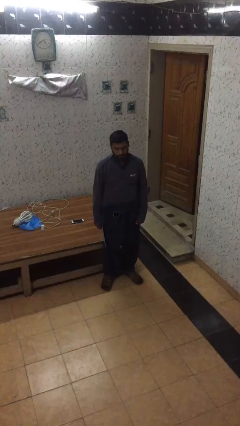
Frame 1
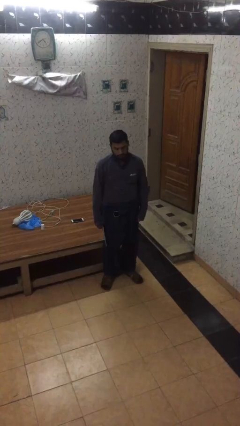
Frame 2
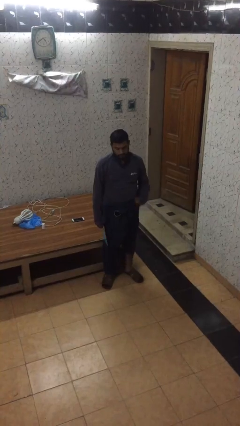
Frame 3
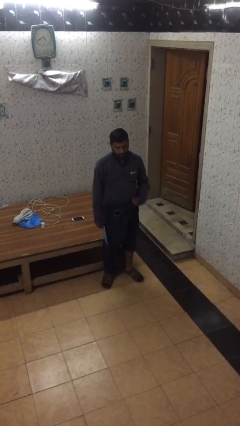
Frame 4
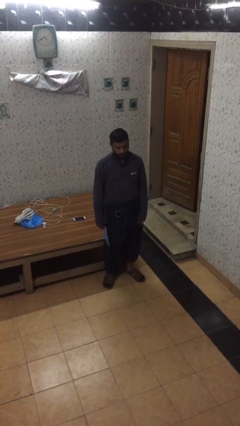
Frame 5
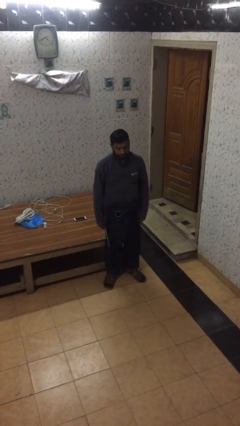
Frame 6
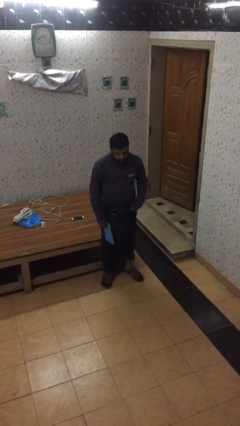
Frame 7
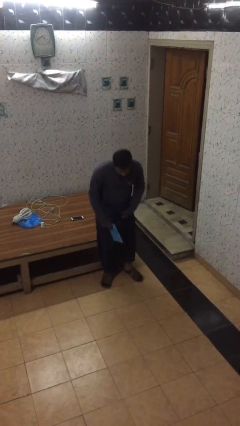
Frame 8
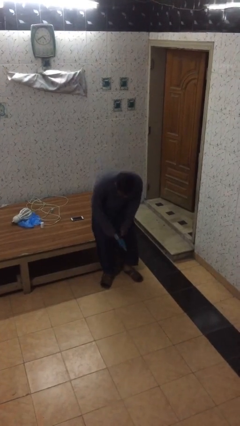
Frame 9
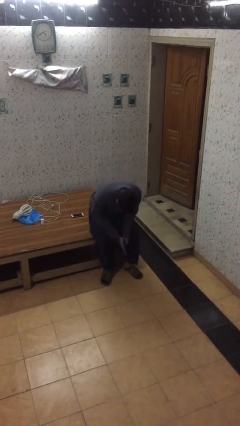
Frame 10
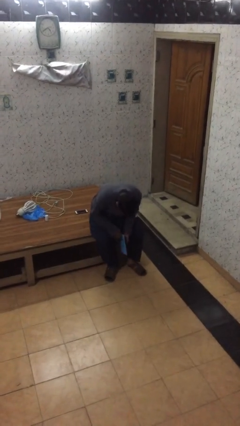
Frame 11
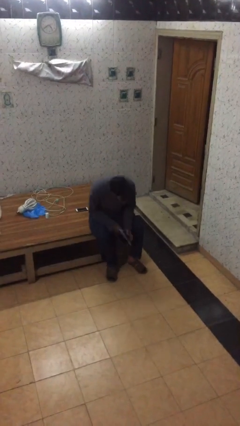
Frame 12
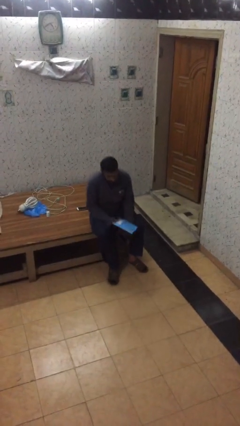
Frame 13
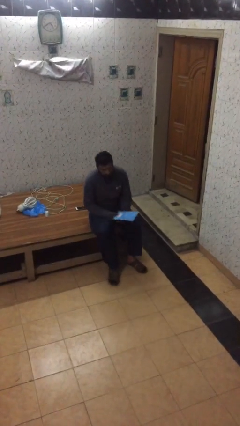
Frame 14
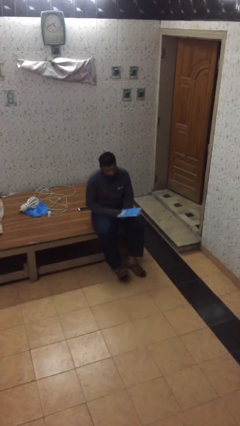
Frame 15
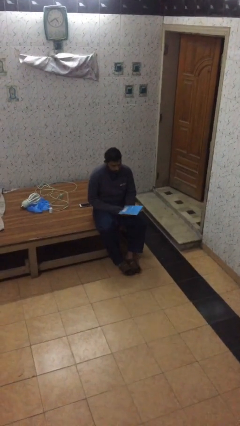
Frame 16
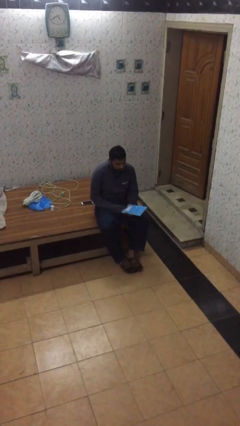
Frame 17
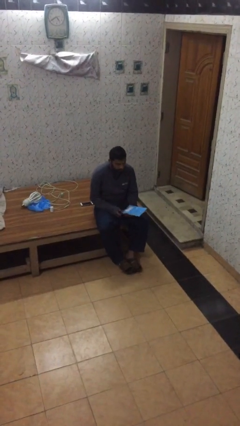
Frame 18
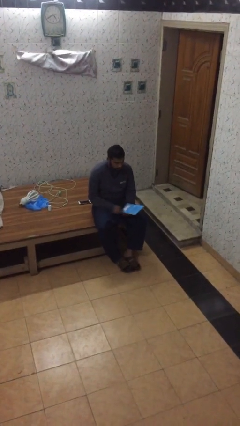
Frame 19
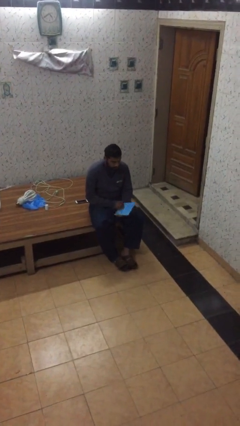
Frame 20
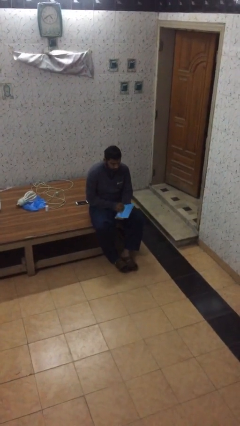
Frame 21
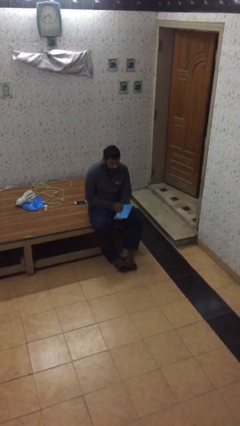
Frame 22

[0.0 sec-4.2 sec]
person sits down

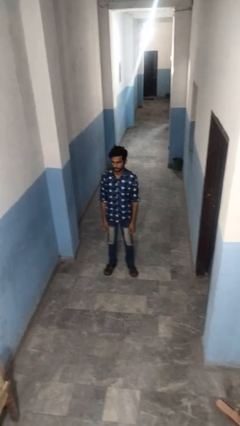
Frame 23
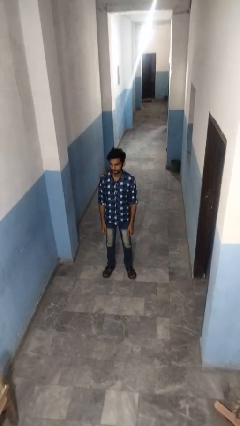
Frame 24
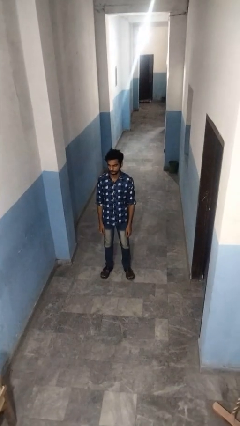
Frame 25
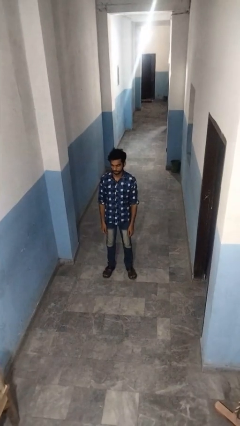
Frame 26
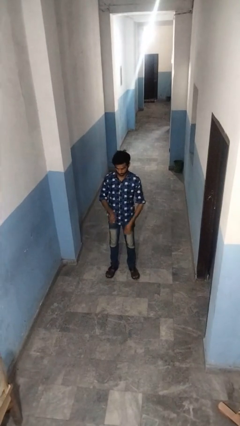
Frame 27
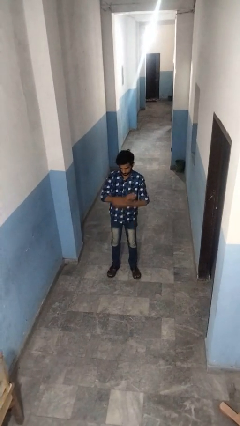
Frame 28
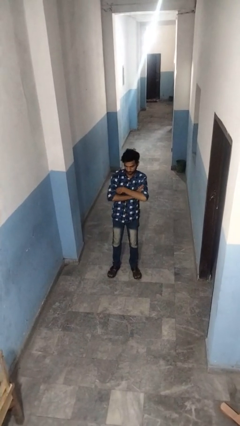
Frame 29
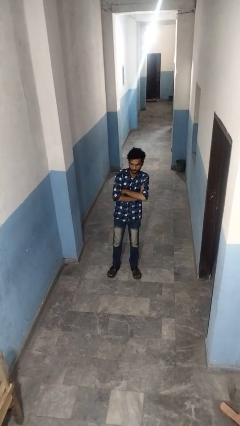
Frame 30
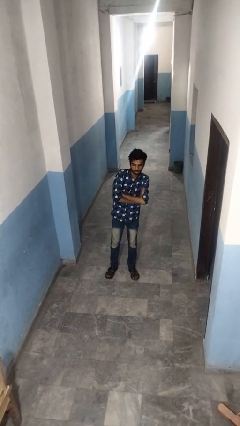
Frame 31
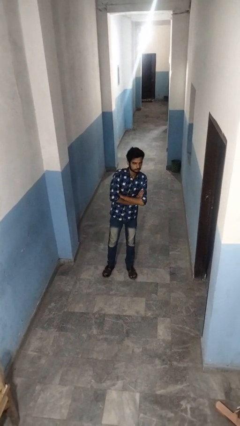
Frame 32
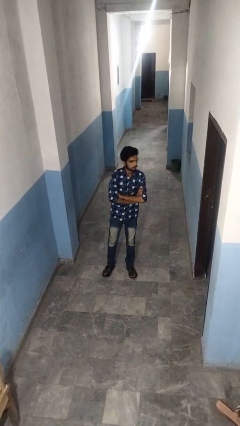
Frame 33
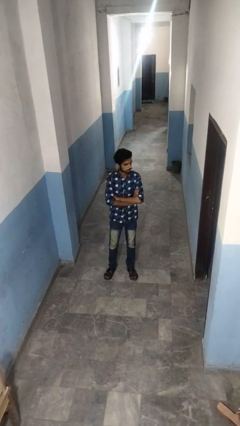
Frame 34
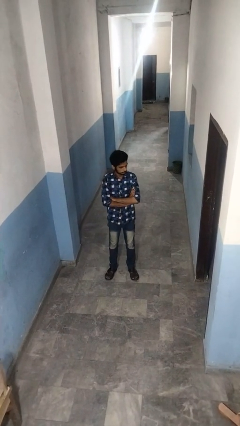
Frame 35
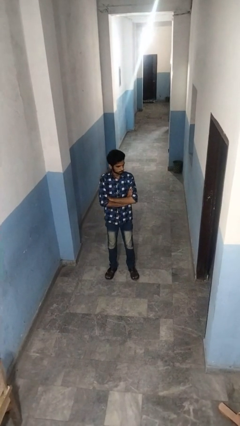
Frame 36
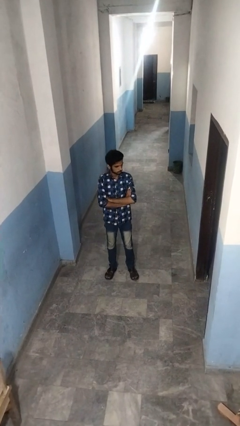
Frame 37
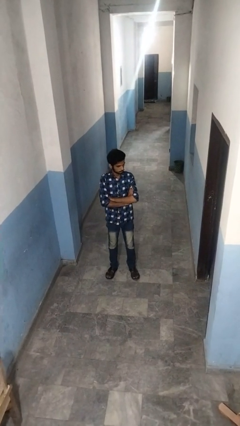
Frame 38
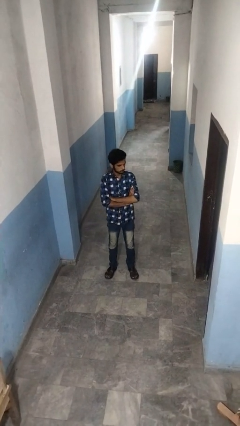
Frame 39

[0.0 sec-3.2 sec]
person crosses arms

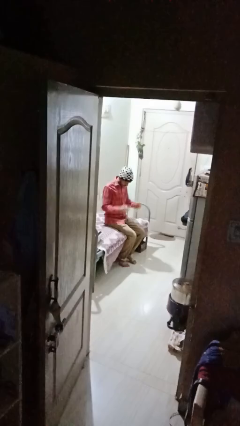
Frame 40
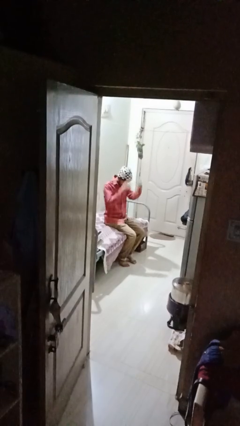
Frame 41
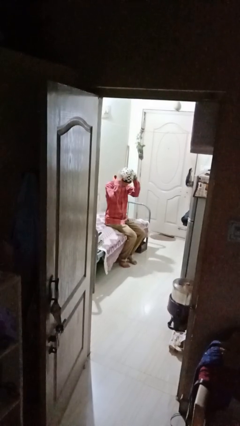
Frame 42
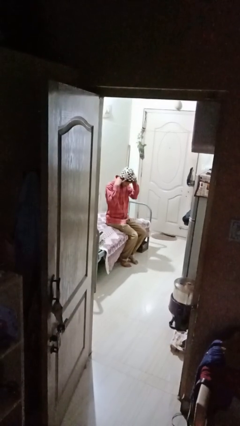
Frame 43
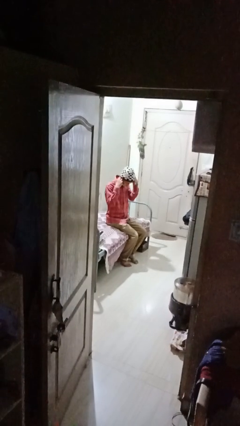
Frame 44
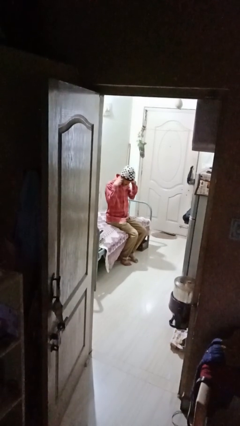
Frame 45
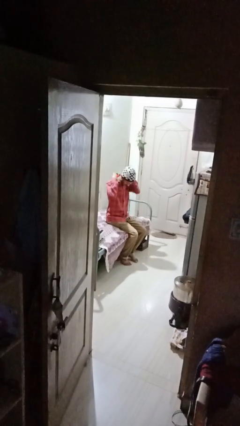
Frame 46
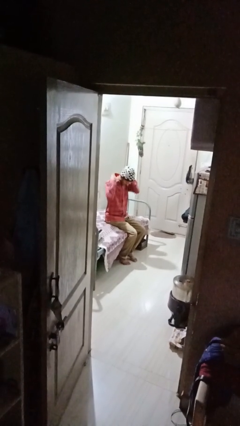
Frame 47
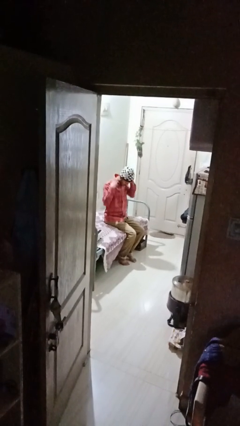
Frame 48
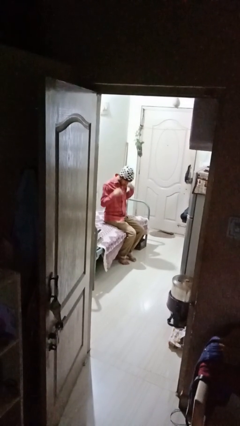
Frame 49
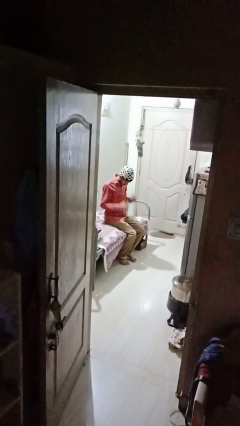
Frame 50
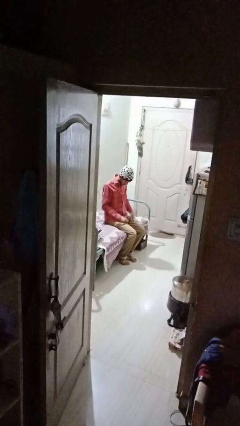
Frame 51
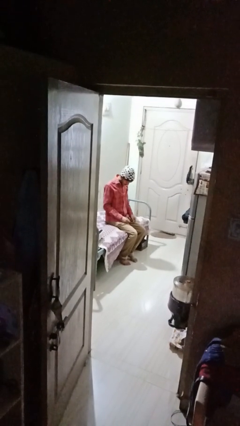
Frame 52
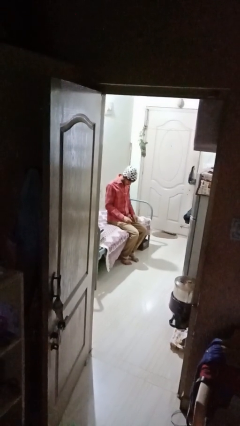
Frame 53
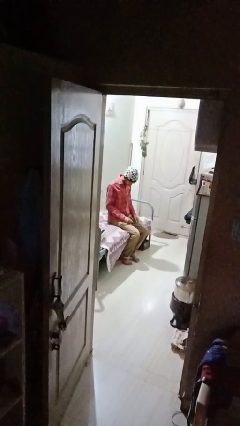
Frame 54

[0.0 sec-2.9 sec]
person puts on necklace

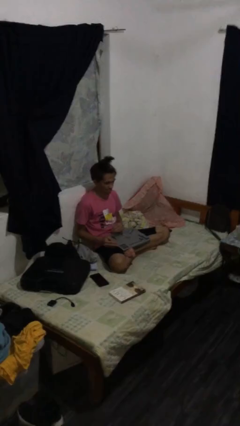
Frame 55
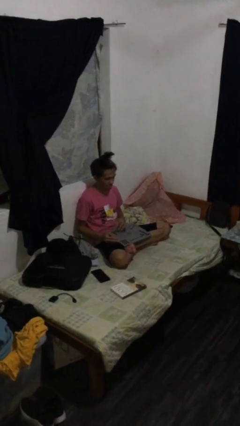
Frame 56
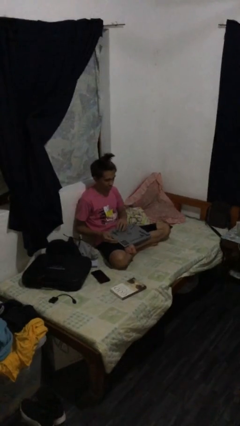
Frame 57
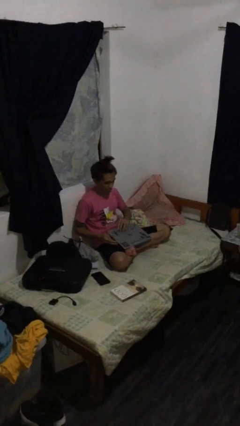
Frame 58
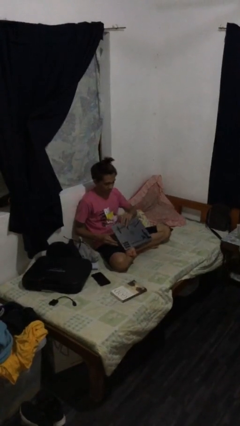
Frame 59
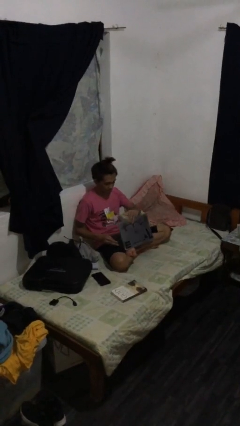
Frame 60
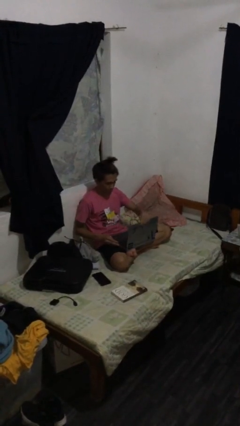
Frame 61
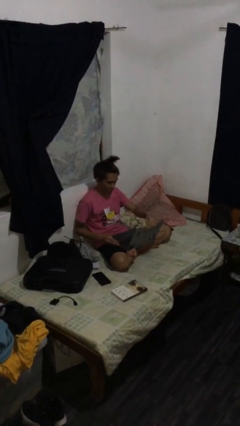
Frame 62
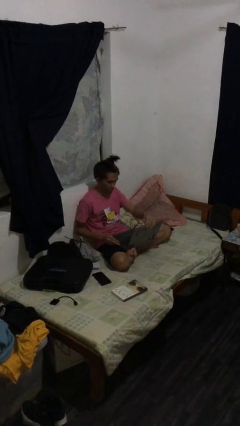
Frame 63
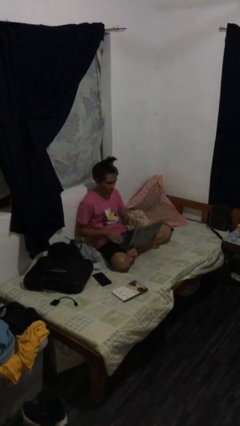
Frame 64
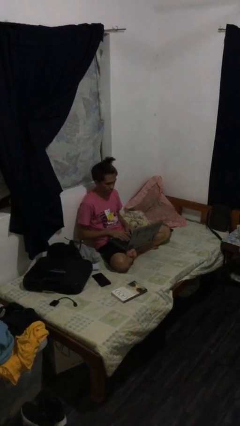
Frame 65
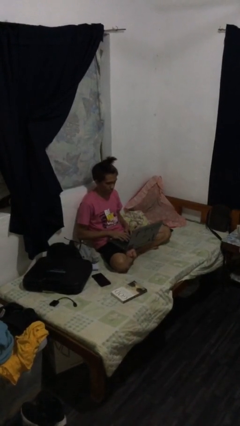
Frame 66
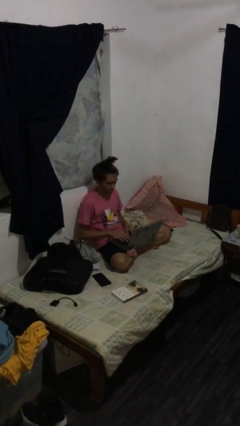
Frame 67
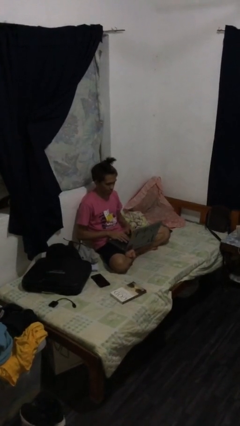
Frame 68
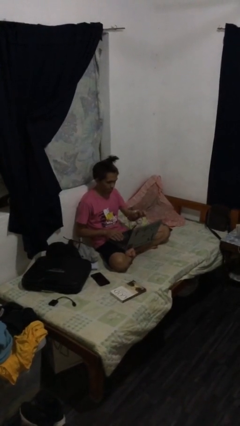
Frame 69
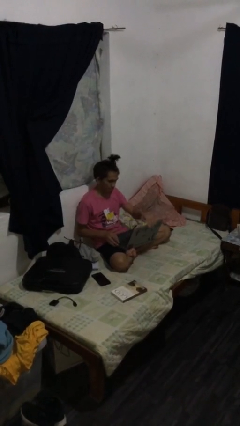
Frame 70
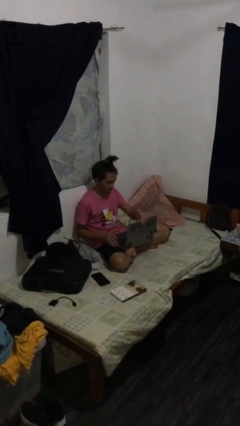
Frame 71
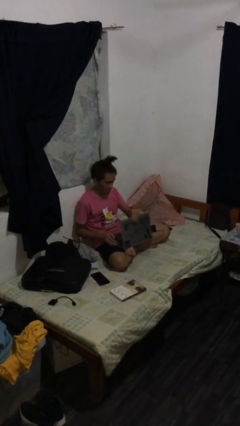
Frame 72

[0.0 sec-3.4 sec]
person interacts with laptop

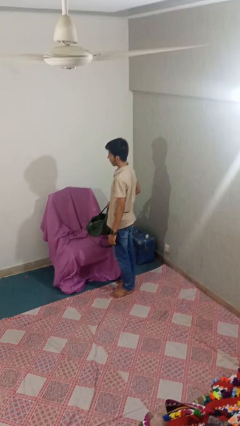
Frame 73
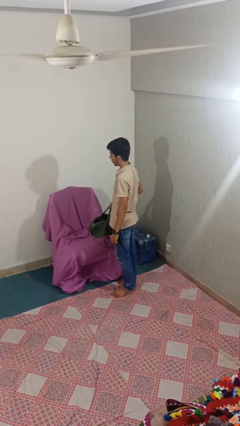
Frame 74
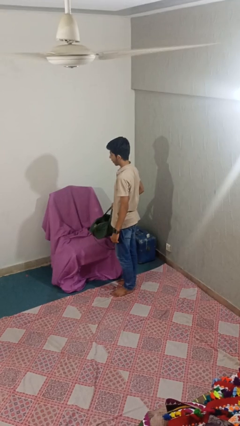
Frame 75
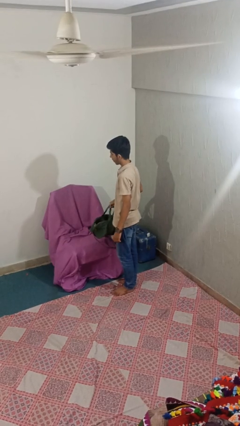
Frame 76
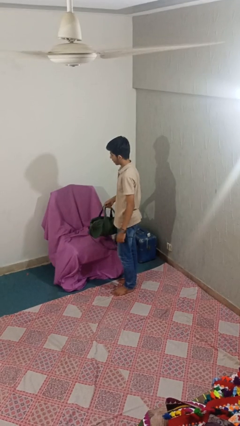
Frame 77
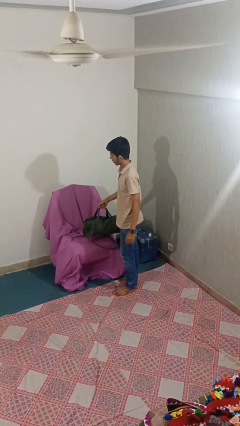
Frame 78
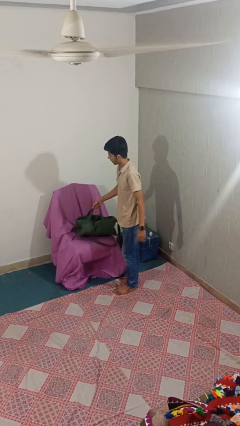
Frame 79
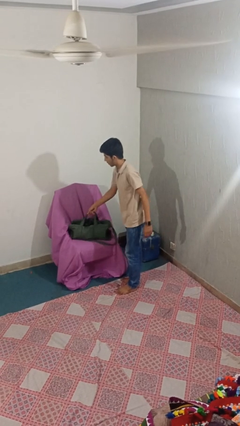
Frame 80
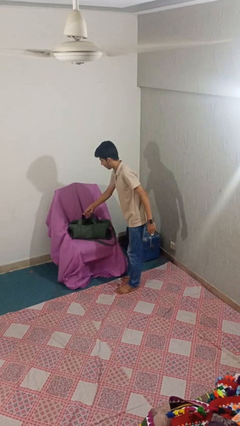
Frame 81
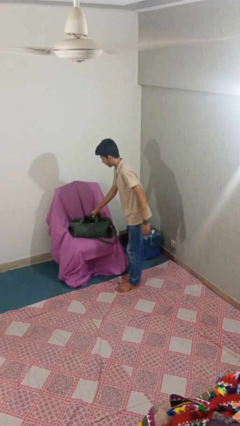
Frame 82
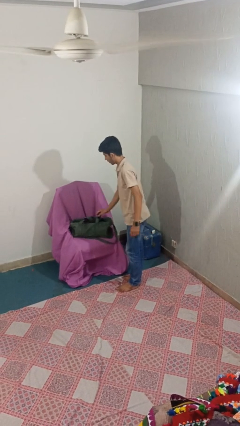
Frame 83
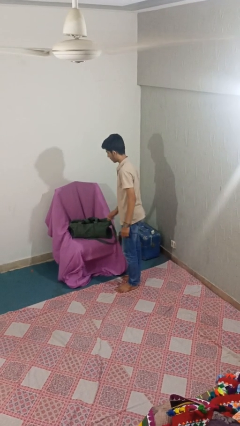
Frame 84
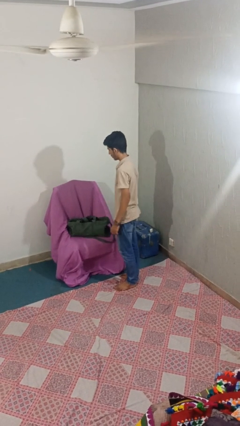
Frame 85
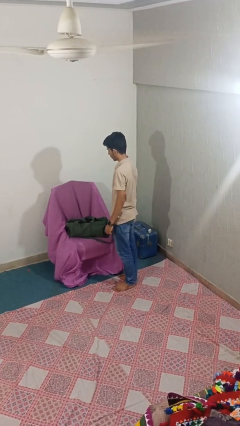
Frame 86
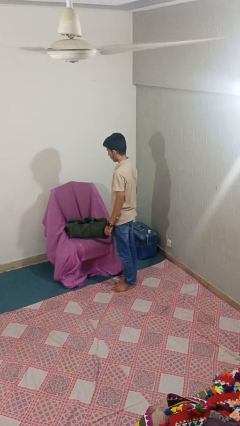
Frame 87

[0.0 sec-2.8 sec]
person puts down object on couch

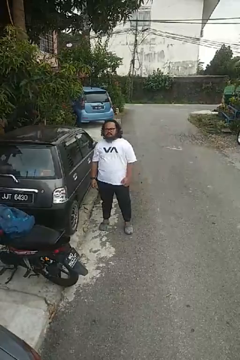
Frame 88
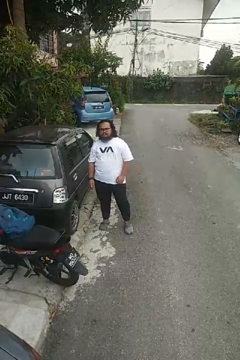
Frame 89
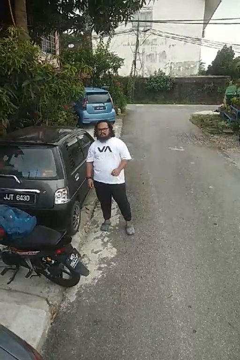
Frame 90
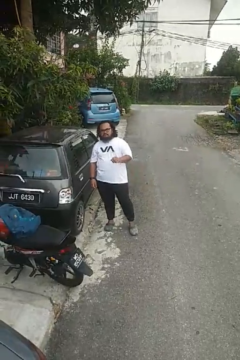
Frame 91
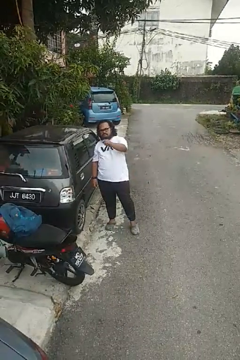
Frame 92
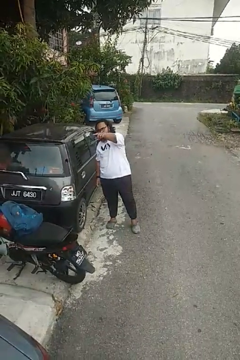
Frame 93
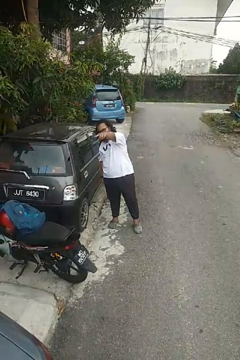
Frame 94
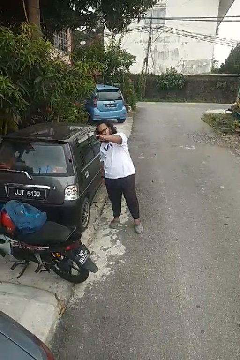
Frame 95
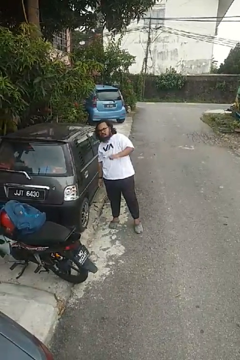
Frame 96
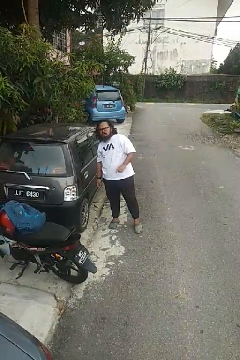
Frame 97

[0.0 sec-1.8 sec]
person points at person
